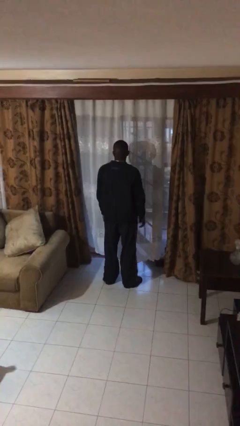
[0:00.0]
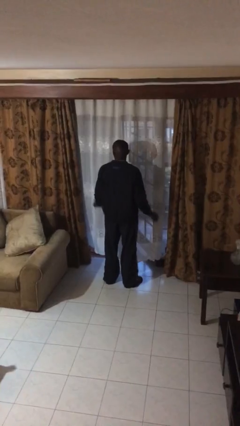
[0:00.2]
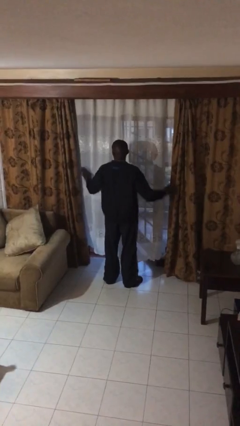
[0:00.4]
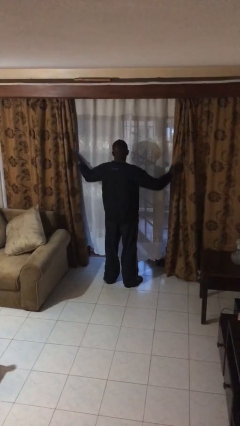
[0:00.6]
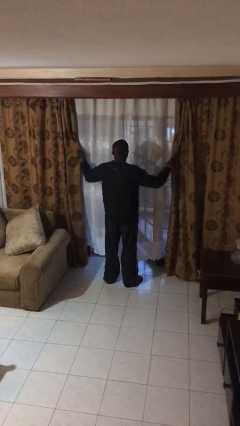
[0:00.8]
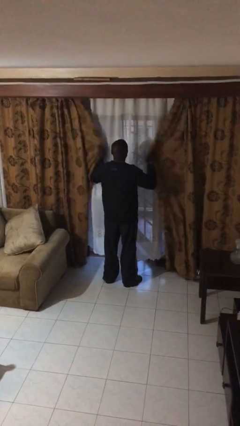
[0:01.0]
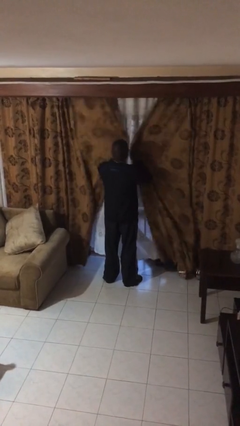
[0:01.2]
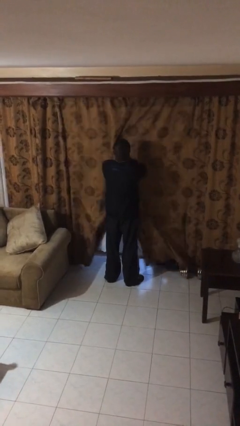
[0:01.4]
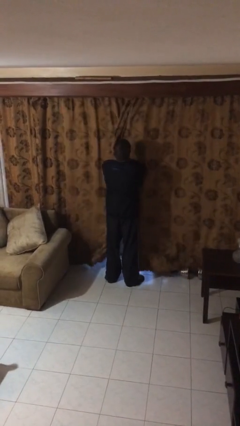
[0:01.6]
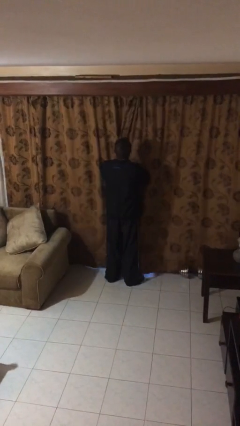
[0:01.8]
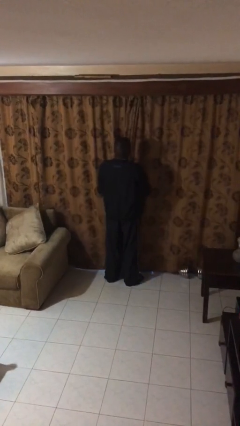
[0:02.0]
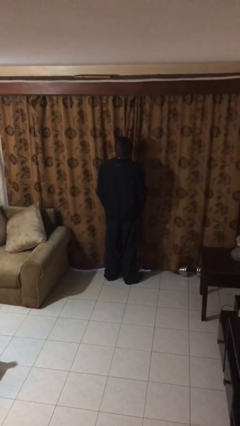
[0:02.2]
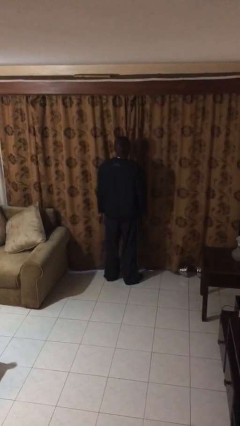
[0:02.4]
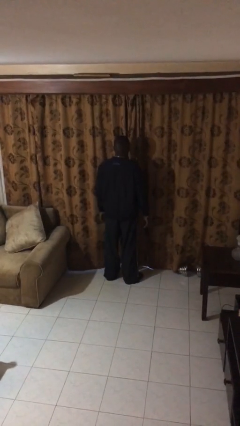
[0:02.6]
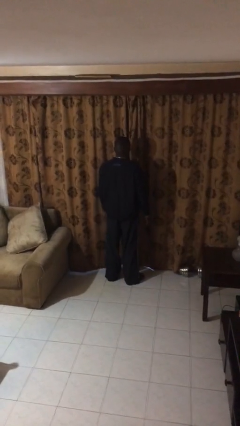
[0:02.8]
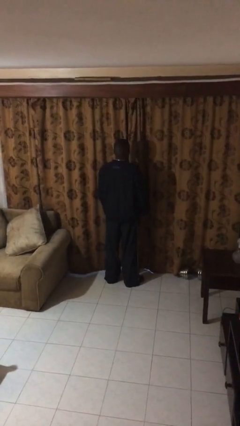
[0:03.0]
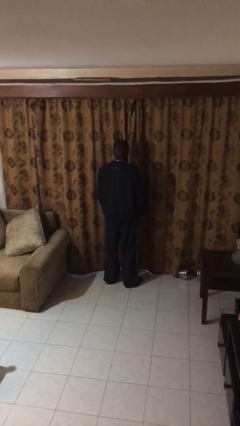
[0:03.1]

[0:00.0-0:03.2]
person closes curtains

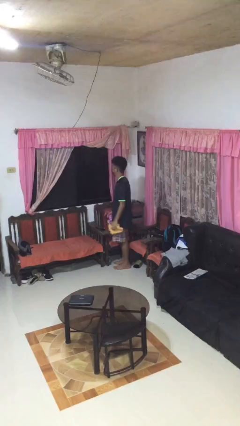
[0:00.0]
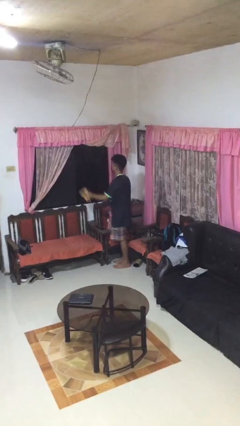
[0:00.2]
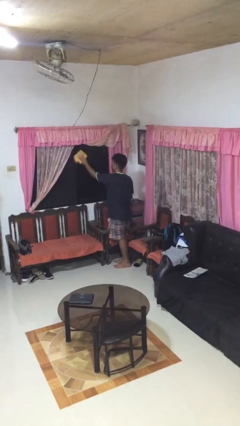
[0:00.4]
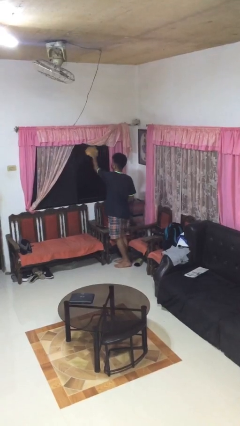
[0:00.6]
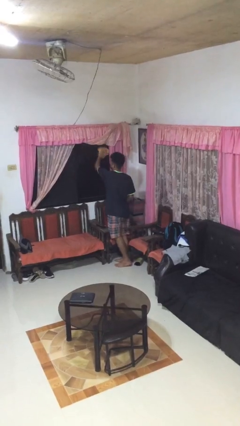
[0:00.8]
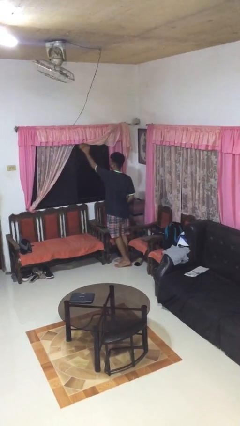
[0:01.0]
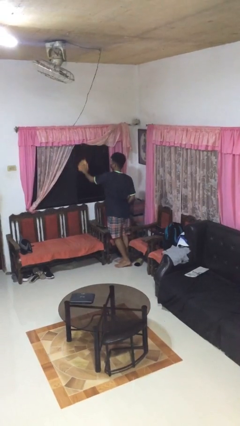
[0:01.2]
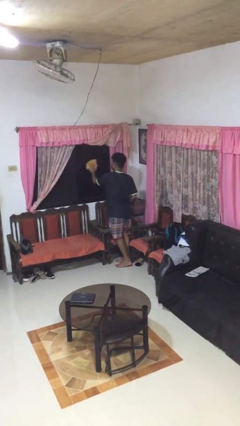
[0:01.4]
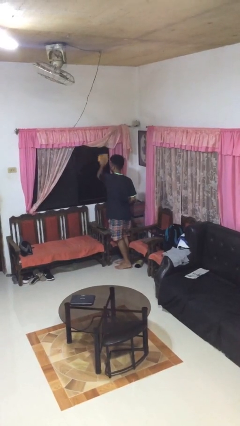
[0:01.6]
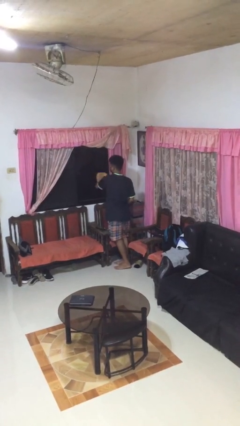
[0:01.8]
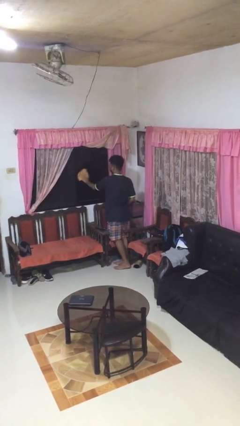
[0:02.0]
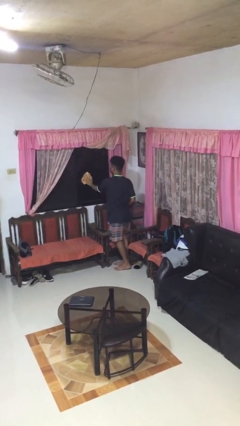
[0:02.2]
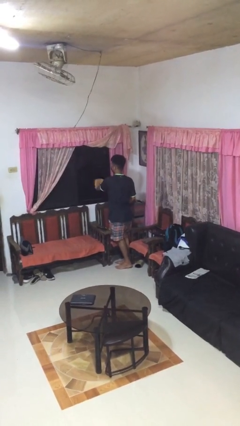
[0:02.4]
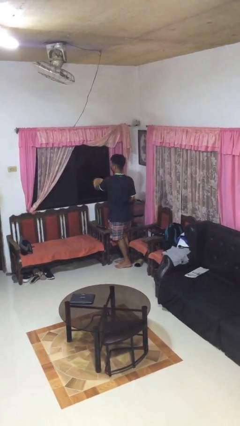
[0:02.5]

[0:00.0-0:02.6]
person washes window

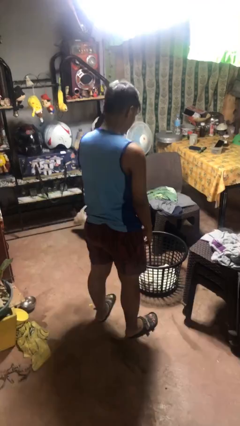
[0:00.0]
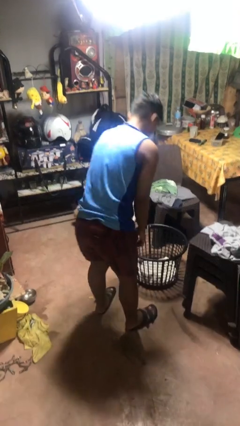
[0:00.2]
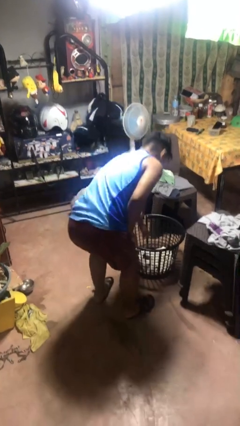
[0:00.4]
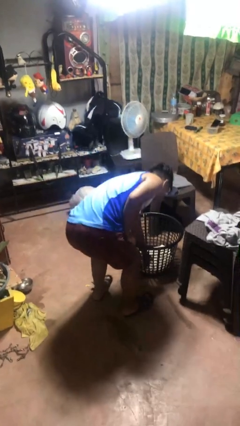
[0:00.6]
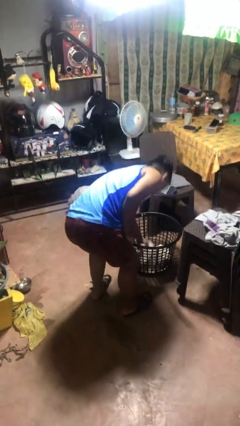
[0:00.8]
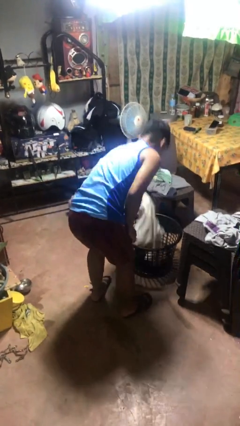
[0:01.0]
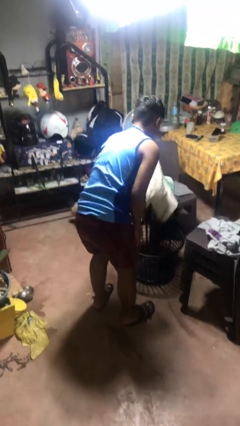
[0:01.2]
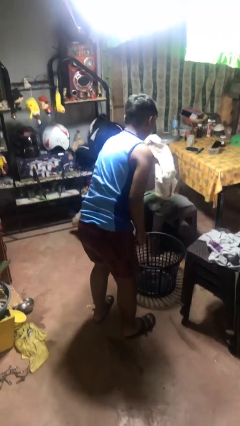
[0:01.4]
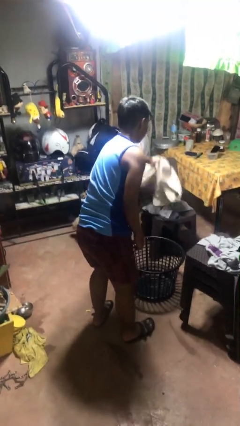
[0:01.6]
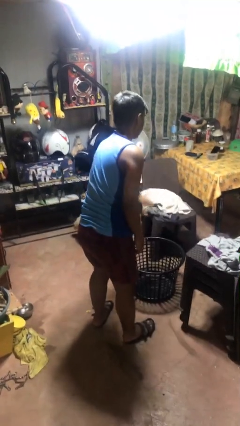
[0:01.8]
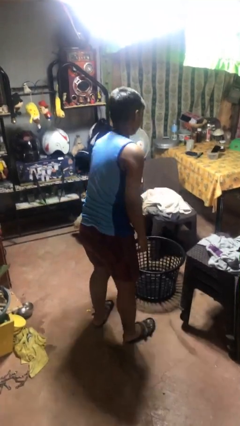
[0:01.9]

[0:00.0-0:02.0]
person takes object from basket

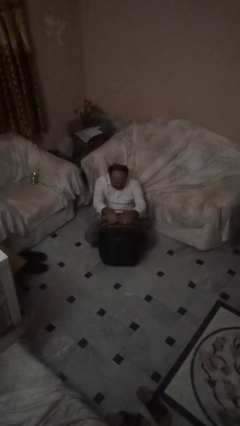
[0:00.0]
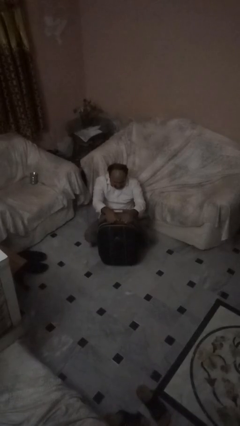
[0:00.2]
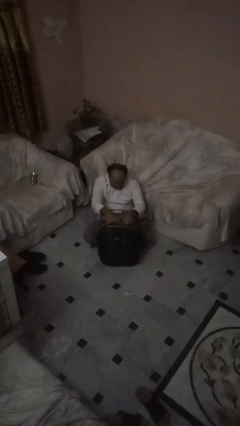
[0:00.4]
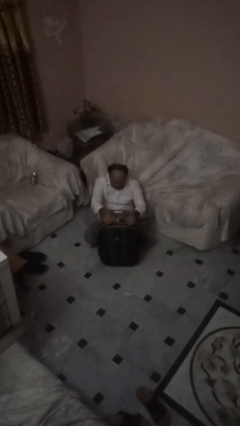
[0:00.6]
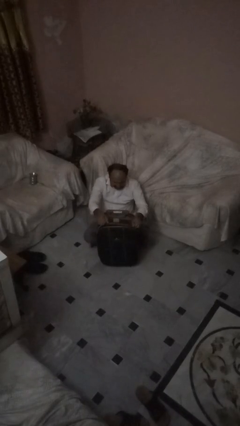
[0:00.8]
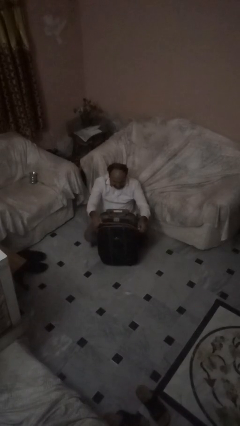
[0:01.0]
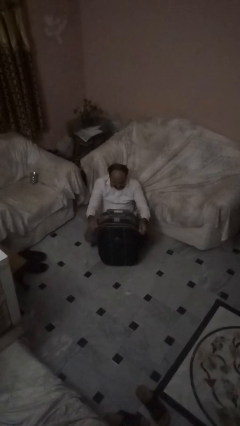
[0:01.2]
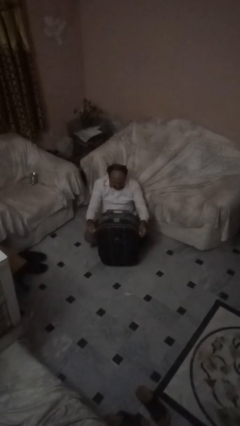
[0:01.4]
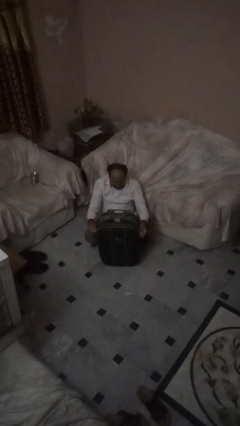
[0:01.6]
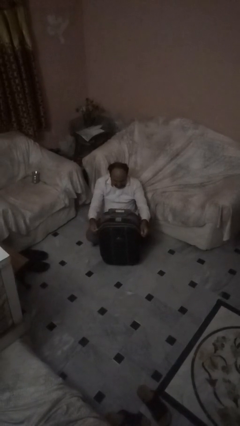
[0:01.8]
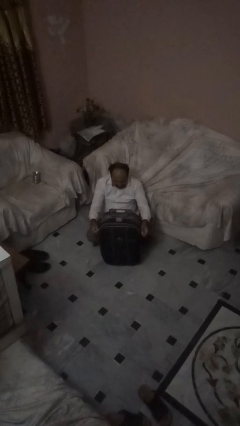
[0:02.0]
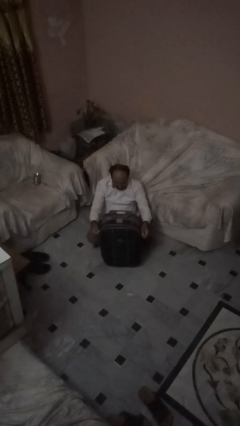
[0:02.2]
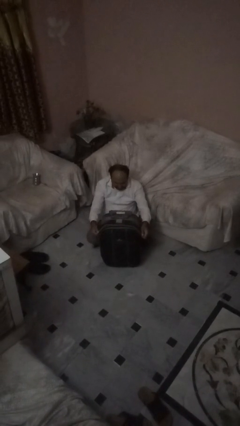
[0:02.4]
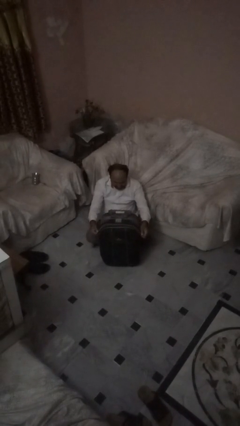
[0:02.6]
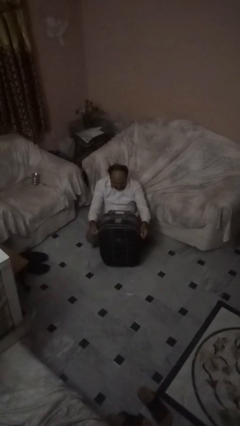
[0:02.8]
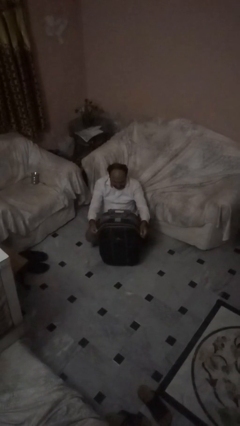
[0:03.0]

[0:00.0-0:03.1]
person opens suitcase

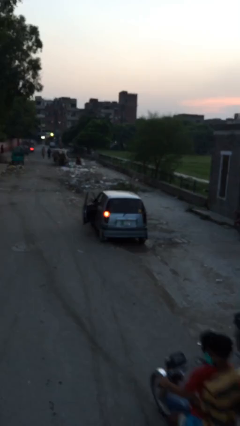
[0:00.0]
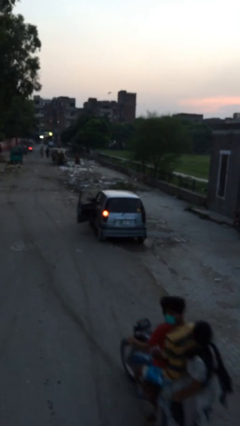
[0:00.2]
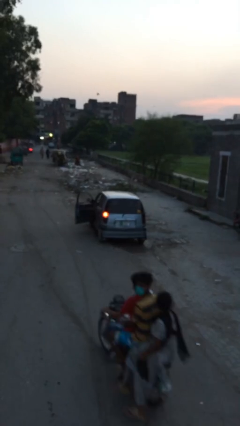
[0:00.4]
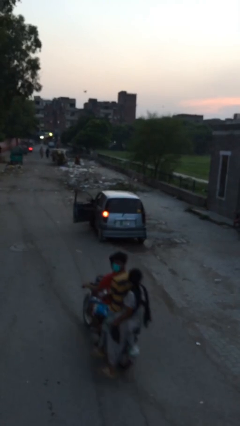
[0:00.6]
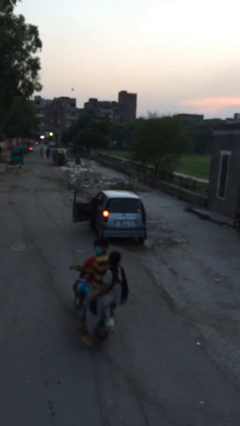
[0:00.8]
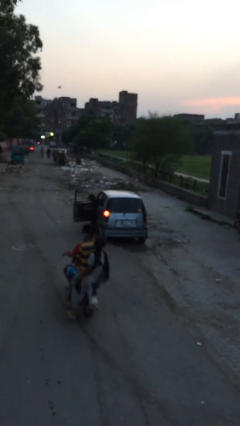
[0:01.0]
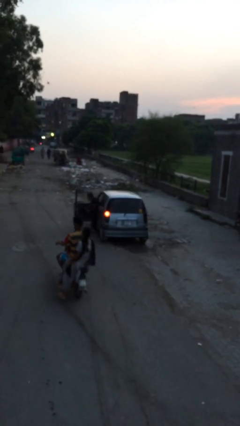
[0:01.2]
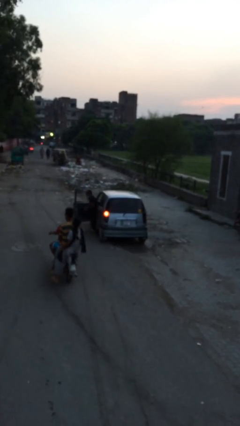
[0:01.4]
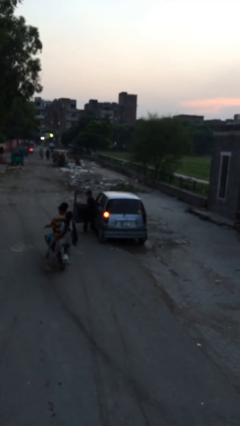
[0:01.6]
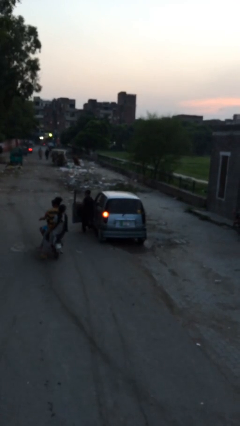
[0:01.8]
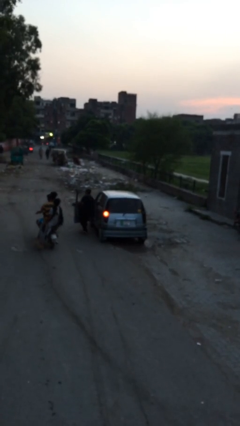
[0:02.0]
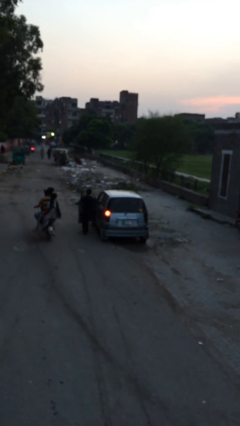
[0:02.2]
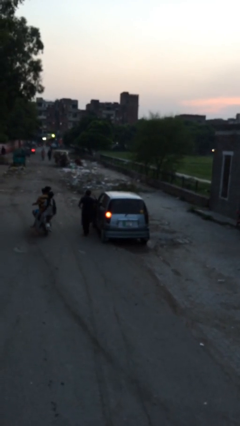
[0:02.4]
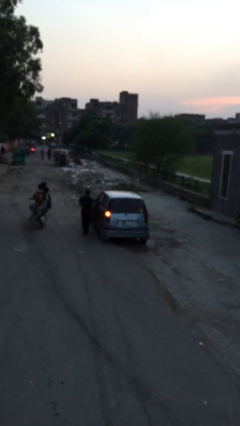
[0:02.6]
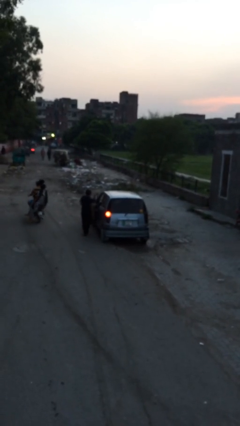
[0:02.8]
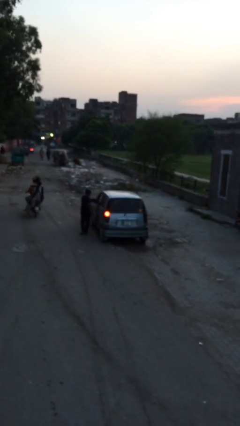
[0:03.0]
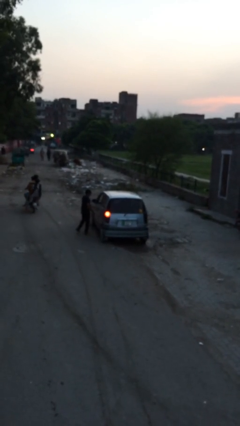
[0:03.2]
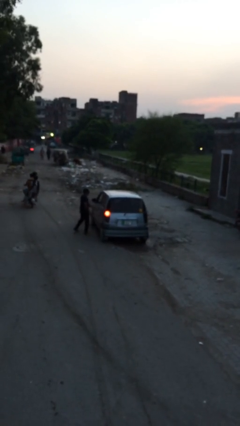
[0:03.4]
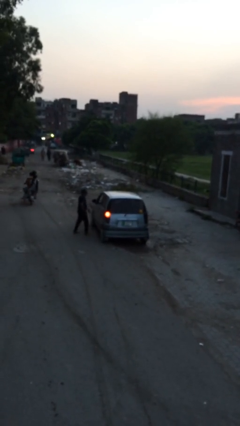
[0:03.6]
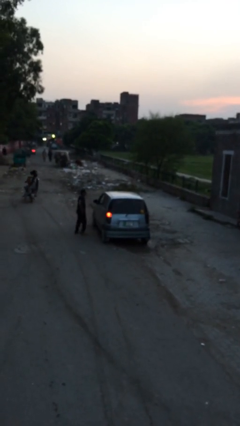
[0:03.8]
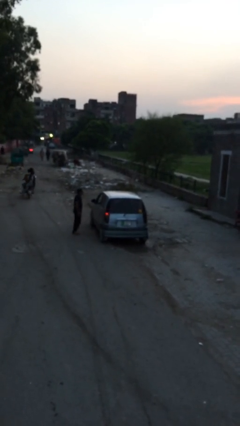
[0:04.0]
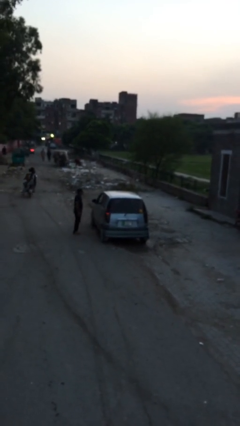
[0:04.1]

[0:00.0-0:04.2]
car drops off person

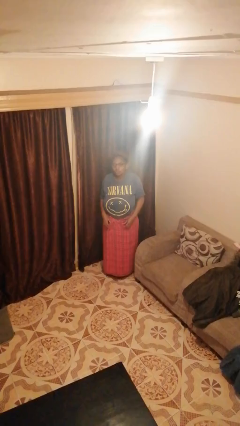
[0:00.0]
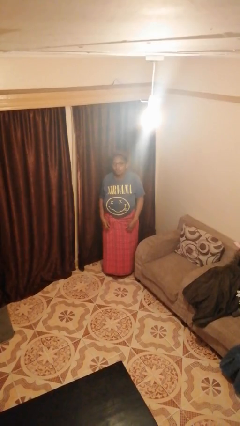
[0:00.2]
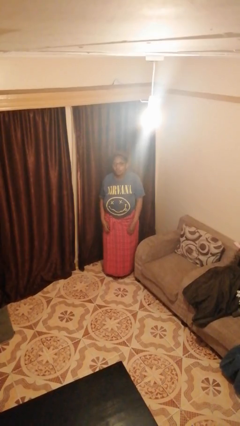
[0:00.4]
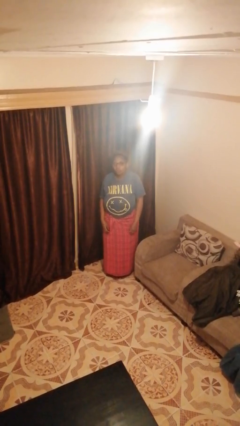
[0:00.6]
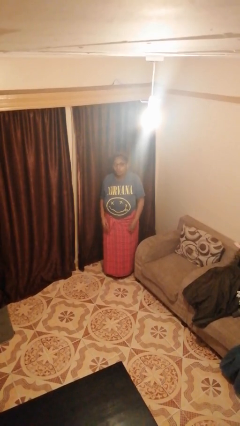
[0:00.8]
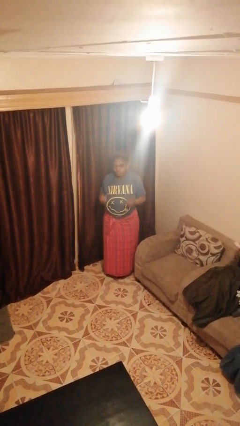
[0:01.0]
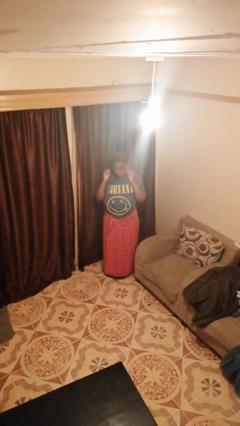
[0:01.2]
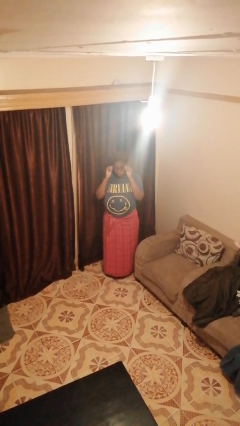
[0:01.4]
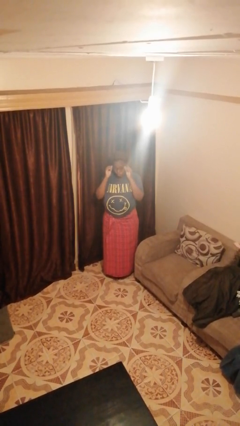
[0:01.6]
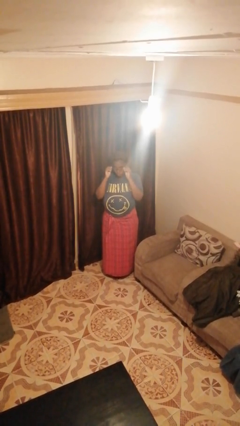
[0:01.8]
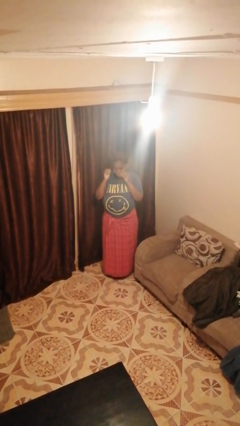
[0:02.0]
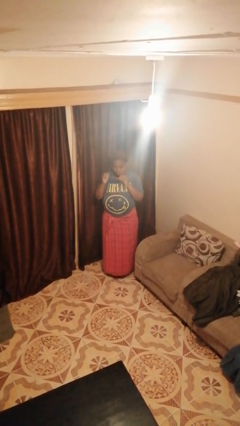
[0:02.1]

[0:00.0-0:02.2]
person takes off glasses

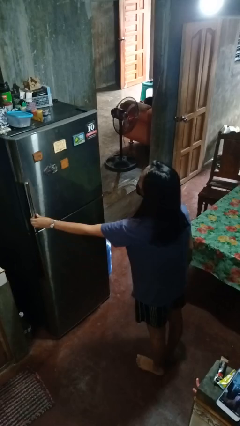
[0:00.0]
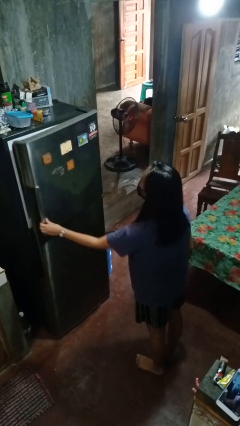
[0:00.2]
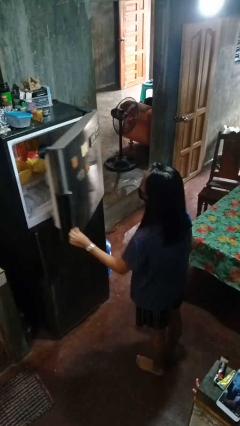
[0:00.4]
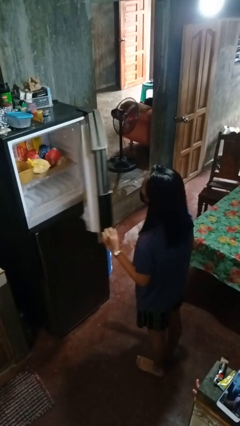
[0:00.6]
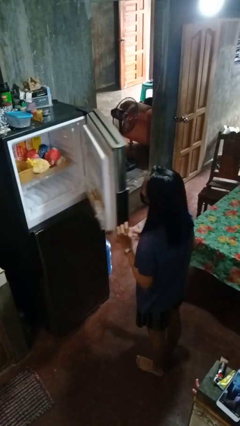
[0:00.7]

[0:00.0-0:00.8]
person opens refrigerator
